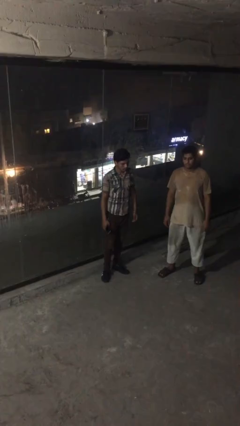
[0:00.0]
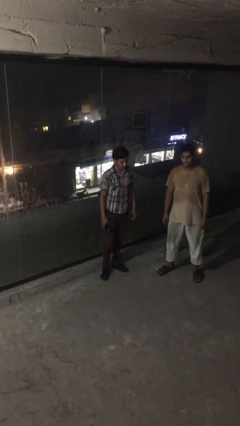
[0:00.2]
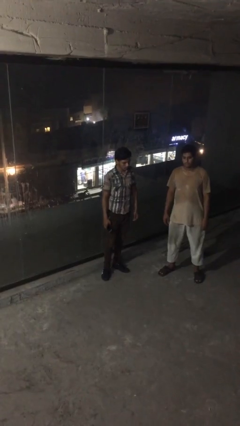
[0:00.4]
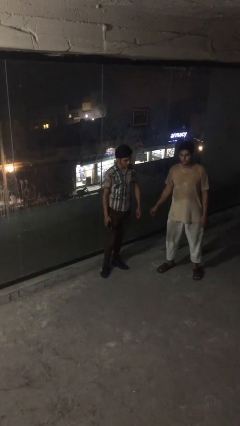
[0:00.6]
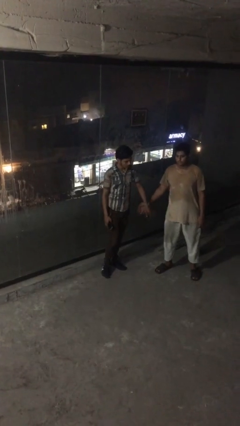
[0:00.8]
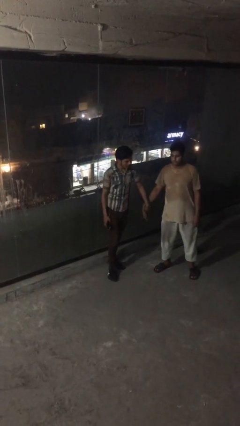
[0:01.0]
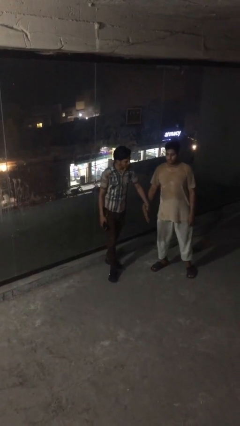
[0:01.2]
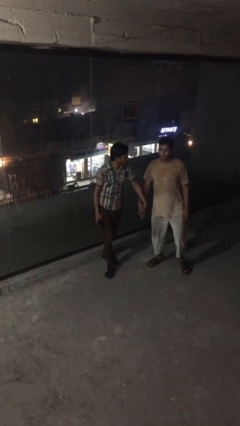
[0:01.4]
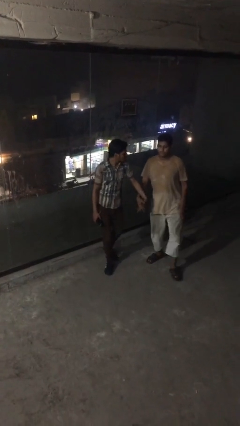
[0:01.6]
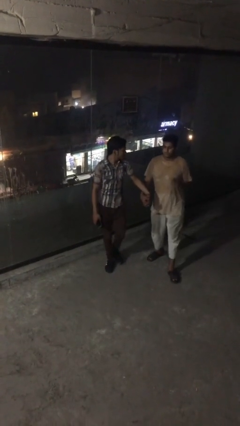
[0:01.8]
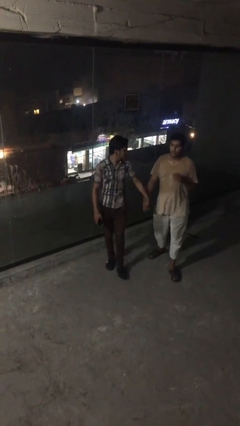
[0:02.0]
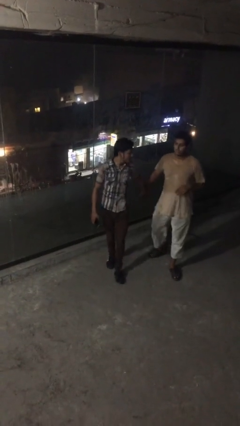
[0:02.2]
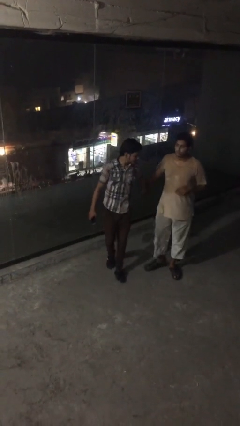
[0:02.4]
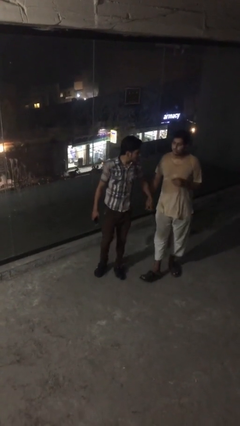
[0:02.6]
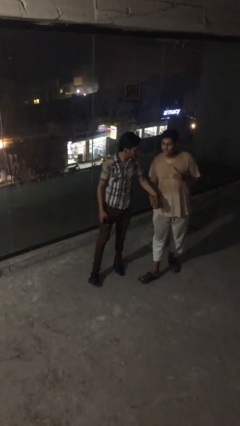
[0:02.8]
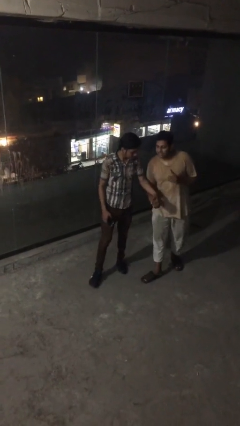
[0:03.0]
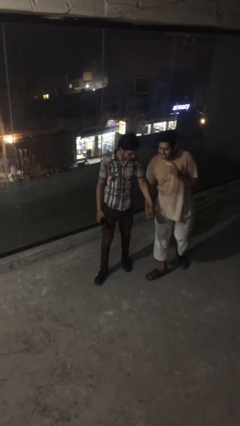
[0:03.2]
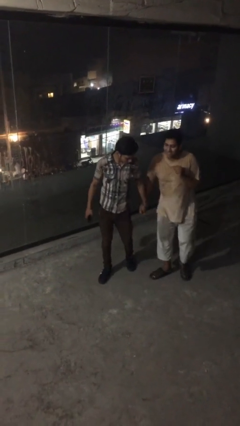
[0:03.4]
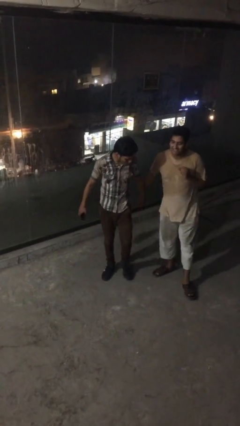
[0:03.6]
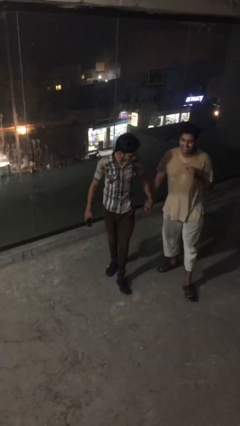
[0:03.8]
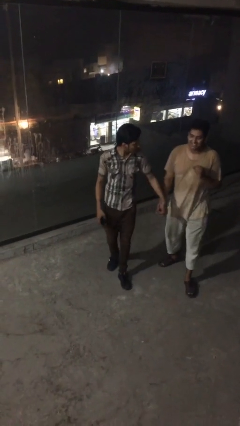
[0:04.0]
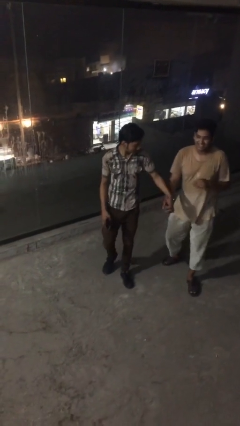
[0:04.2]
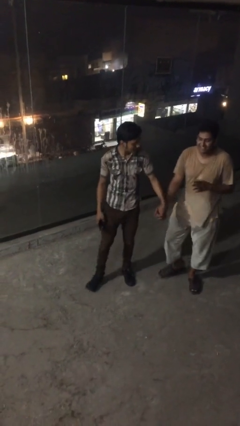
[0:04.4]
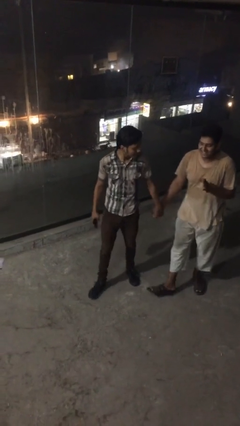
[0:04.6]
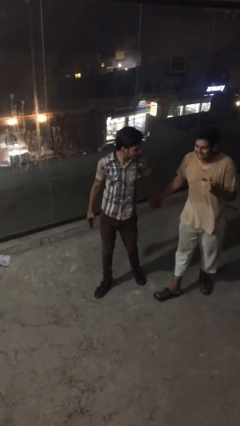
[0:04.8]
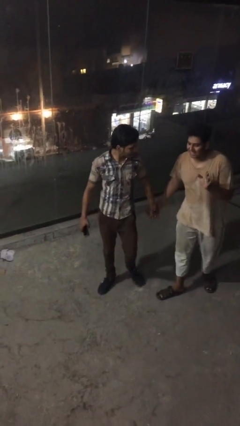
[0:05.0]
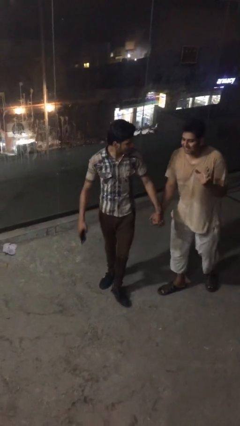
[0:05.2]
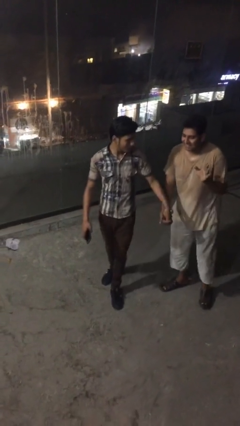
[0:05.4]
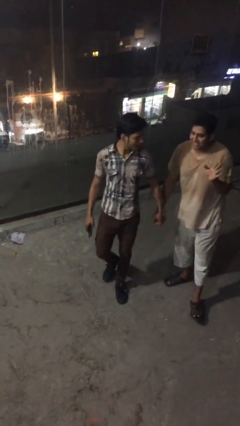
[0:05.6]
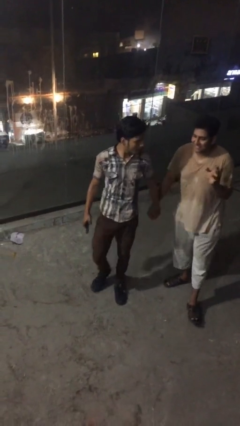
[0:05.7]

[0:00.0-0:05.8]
person holds hand

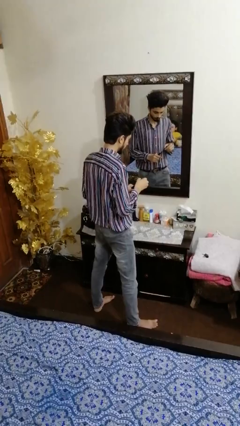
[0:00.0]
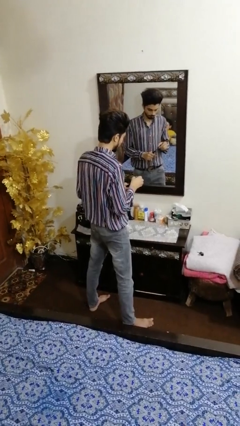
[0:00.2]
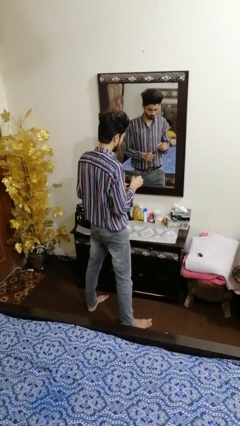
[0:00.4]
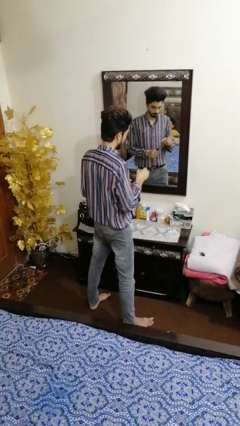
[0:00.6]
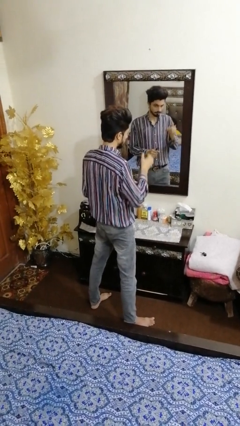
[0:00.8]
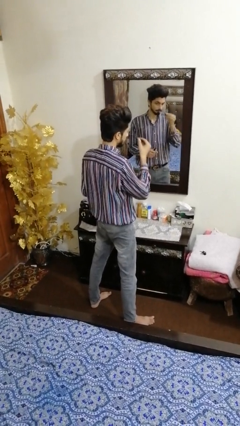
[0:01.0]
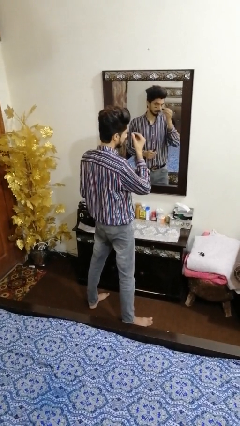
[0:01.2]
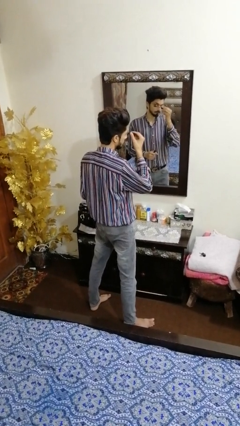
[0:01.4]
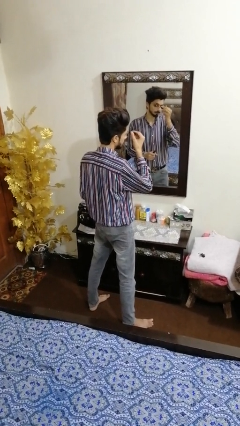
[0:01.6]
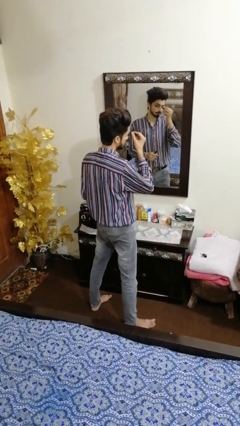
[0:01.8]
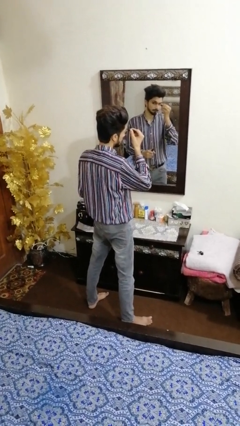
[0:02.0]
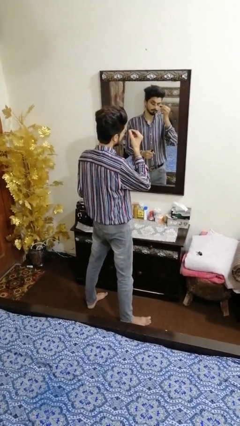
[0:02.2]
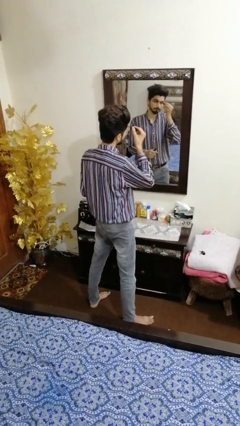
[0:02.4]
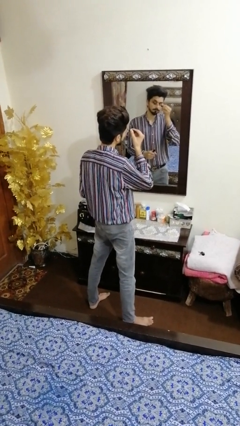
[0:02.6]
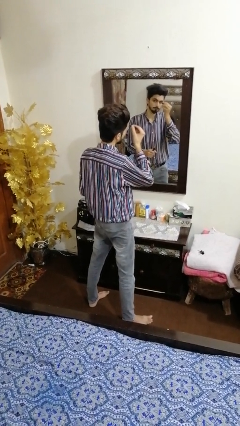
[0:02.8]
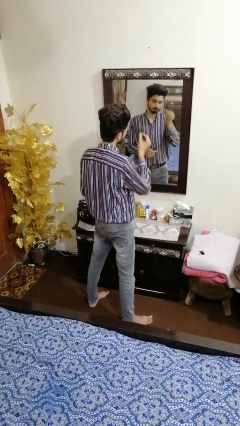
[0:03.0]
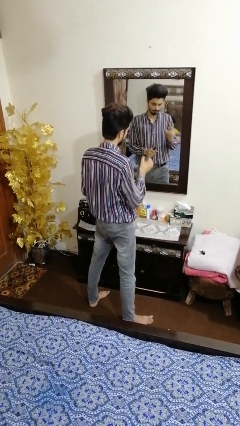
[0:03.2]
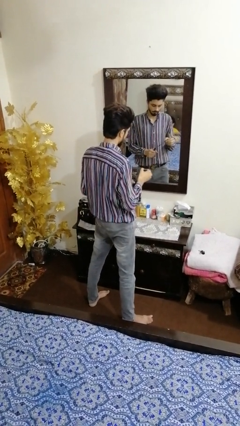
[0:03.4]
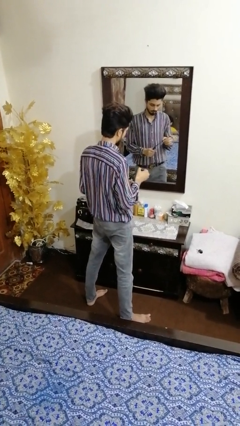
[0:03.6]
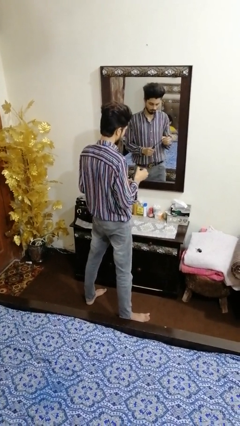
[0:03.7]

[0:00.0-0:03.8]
person applies eye makeup

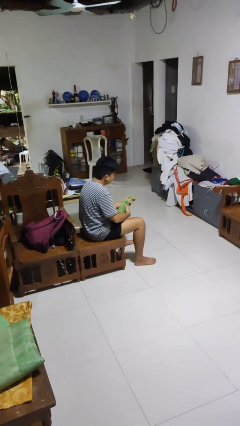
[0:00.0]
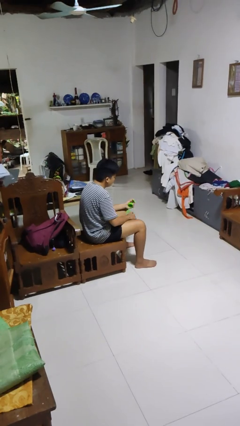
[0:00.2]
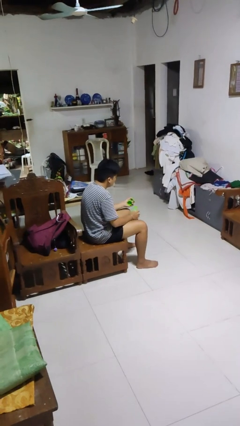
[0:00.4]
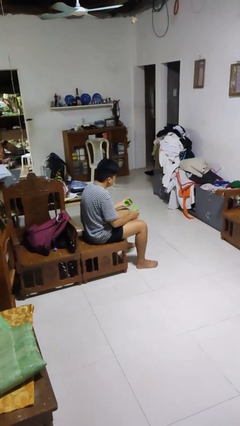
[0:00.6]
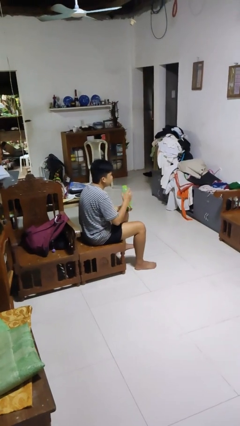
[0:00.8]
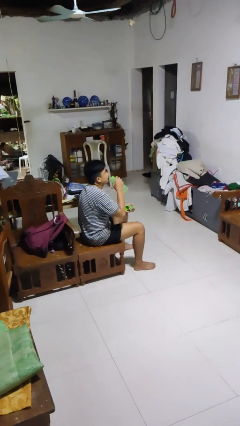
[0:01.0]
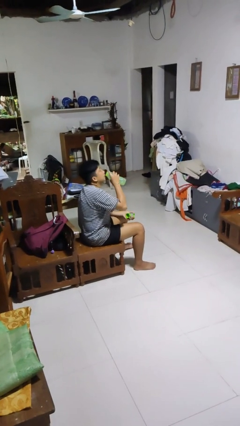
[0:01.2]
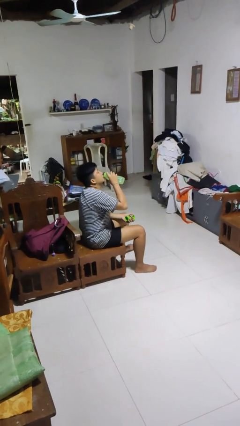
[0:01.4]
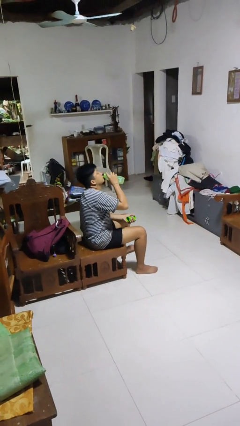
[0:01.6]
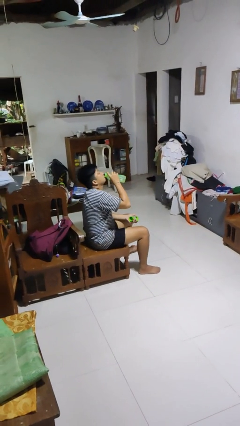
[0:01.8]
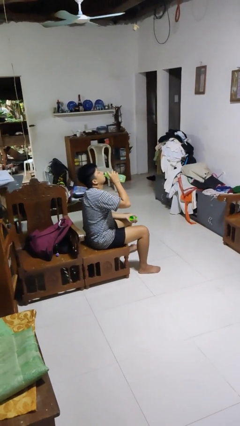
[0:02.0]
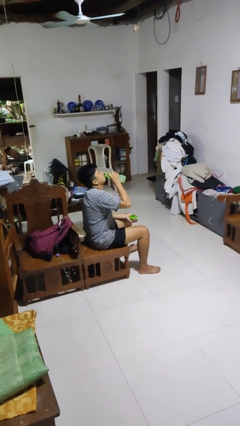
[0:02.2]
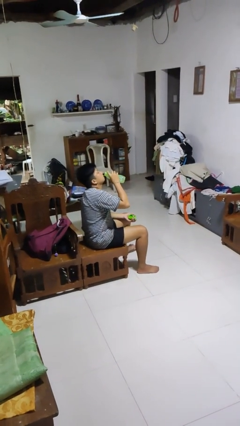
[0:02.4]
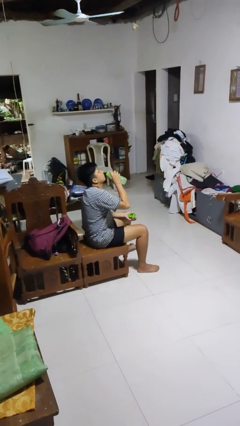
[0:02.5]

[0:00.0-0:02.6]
person drinks from bottle

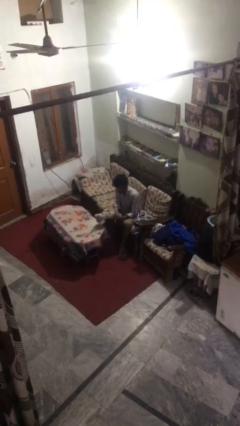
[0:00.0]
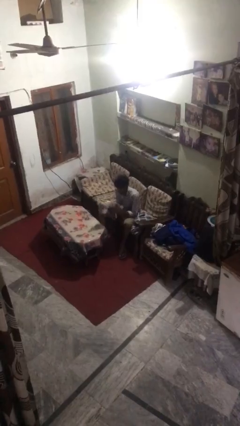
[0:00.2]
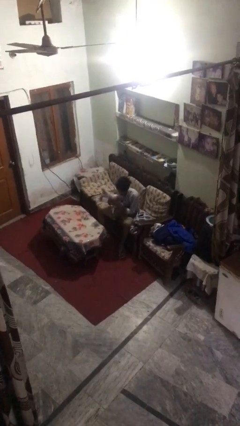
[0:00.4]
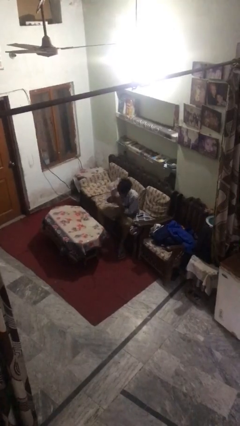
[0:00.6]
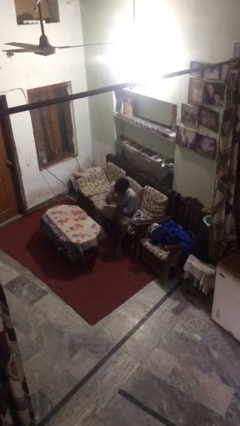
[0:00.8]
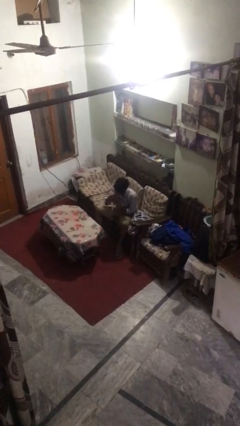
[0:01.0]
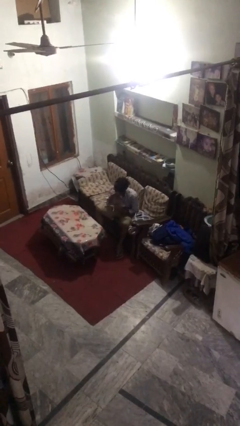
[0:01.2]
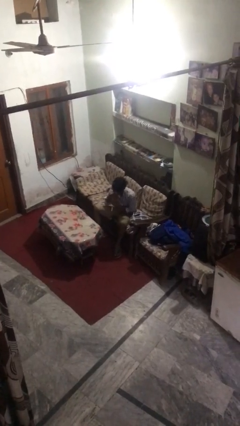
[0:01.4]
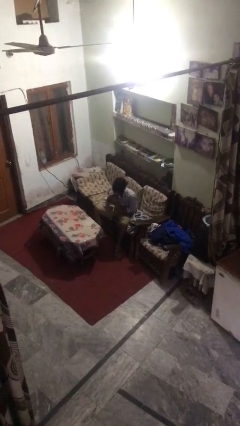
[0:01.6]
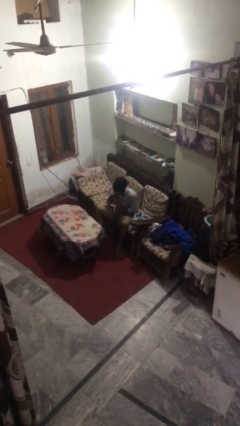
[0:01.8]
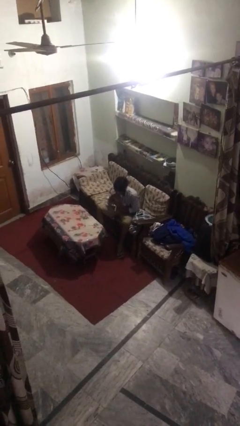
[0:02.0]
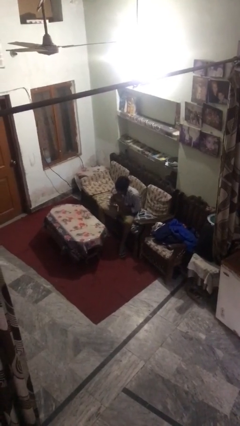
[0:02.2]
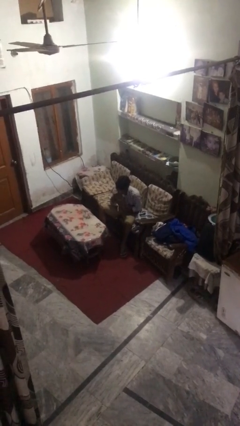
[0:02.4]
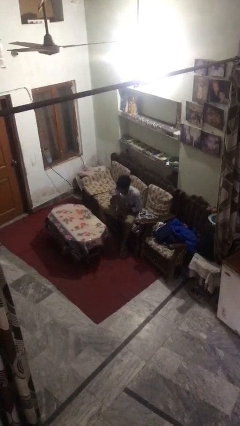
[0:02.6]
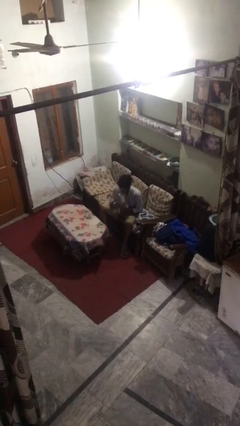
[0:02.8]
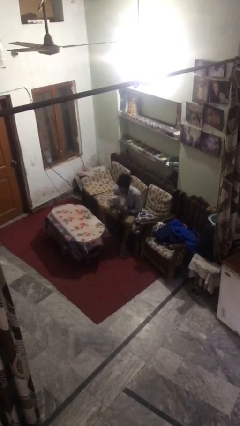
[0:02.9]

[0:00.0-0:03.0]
person hugs stuffed animal

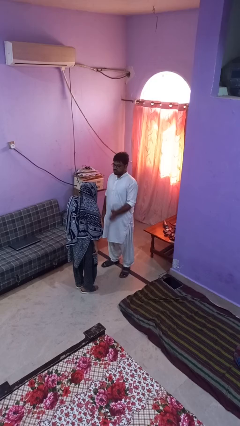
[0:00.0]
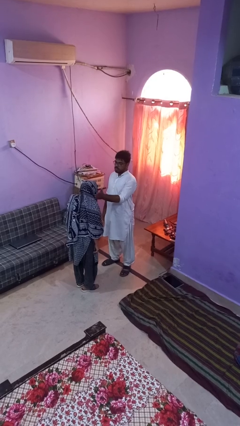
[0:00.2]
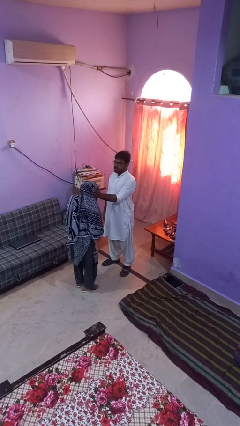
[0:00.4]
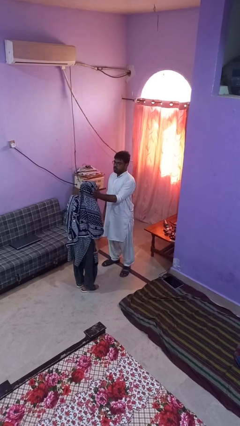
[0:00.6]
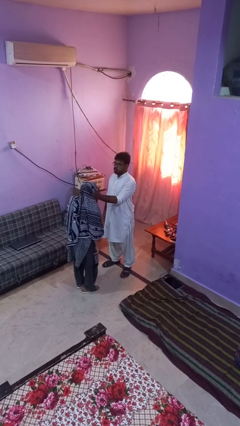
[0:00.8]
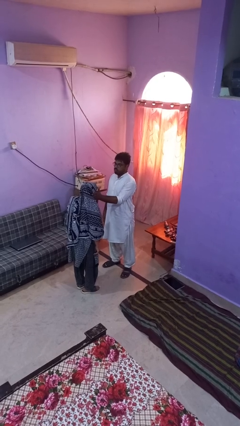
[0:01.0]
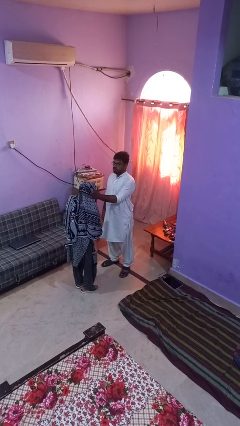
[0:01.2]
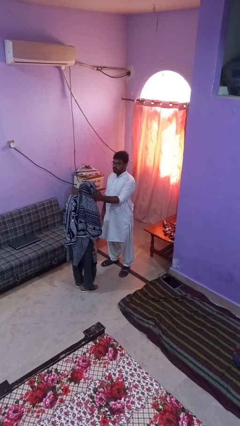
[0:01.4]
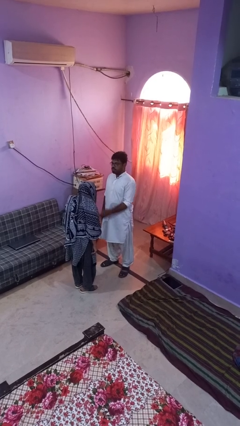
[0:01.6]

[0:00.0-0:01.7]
person touches face of person

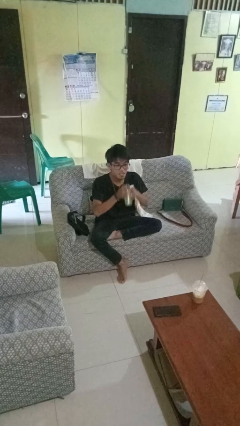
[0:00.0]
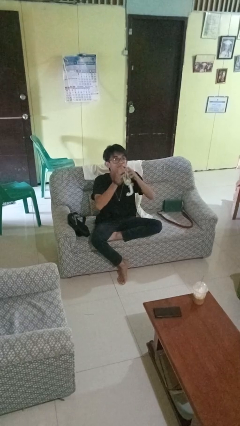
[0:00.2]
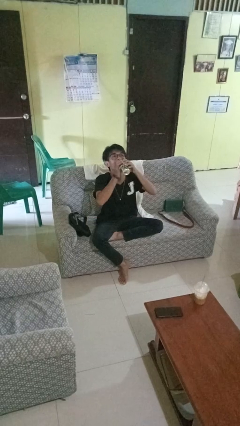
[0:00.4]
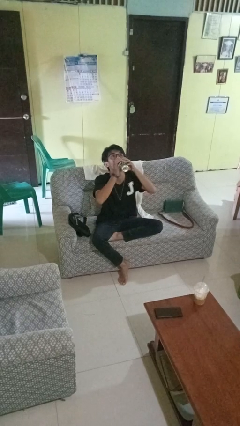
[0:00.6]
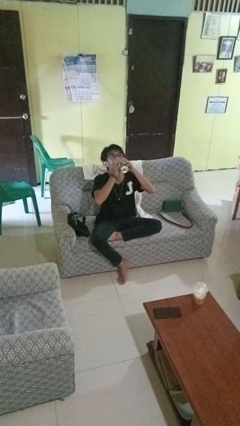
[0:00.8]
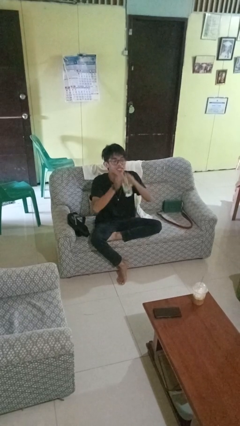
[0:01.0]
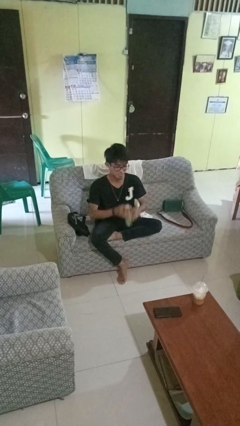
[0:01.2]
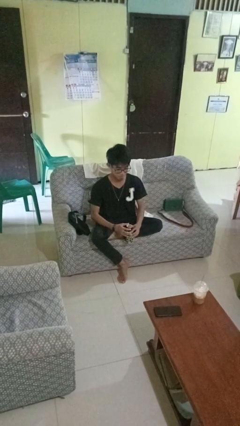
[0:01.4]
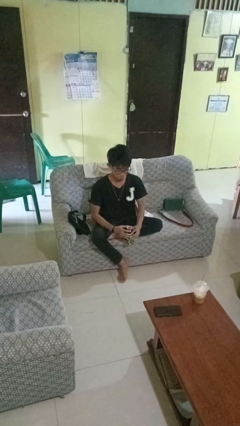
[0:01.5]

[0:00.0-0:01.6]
person drinks from beverage can
